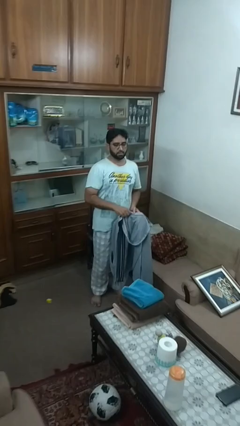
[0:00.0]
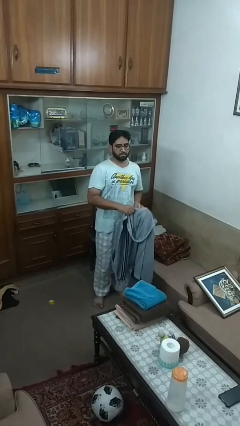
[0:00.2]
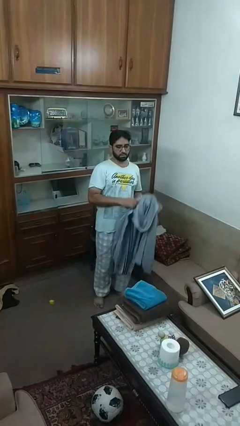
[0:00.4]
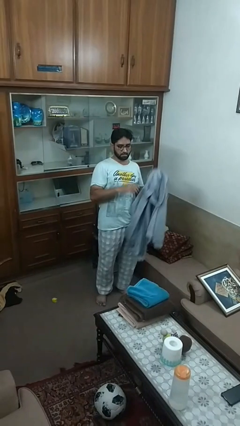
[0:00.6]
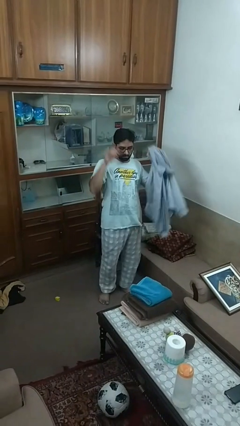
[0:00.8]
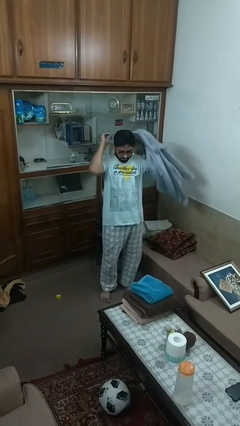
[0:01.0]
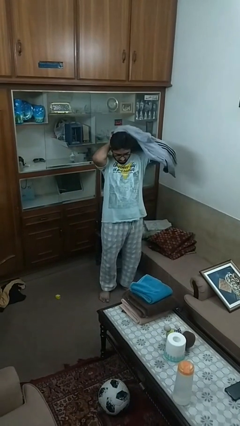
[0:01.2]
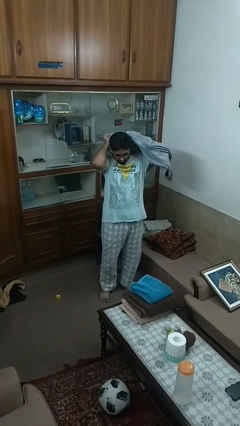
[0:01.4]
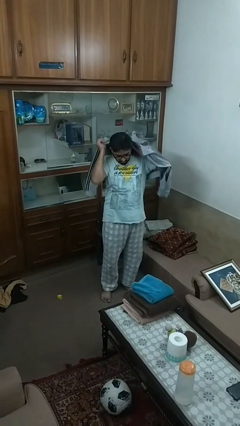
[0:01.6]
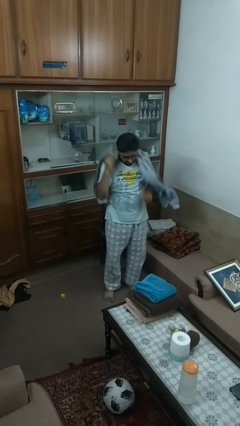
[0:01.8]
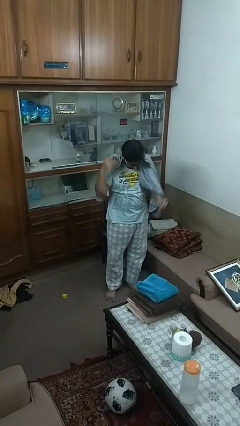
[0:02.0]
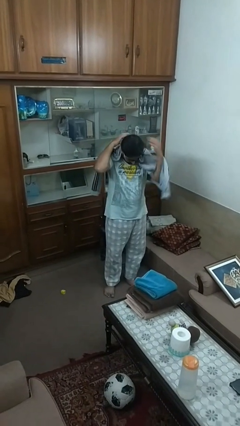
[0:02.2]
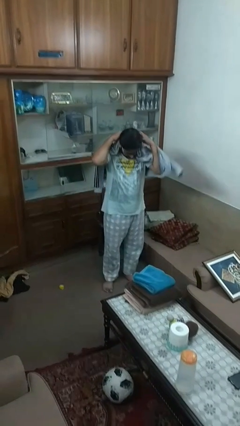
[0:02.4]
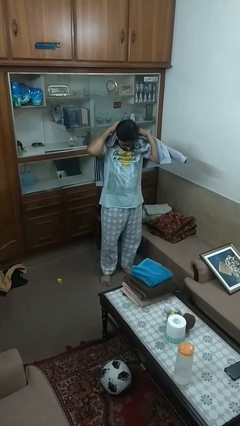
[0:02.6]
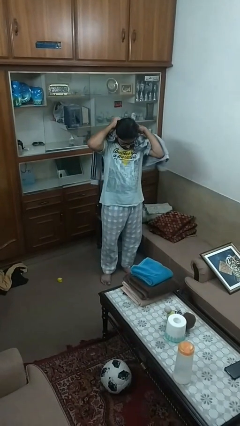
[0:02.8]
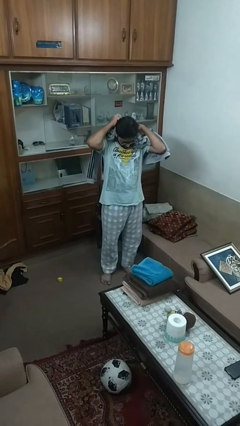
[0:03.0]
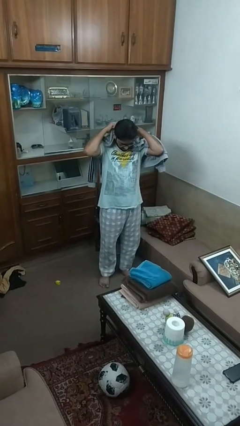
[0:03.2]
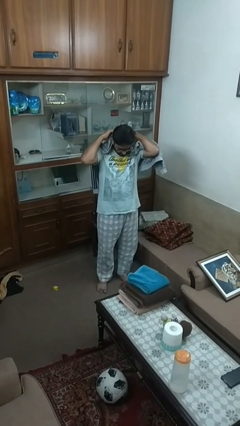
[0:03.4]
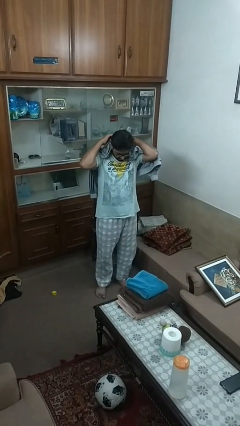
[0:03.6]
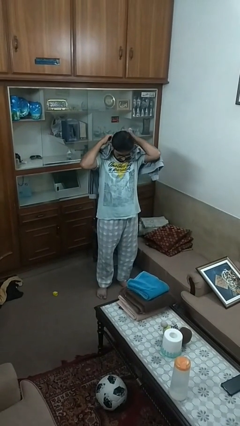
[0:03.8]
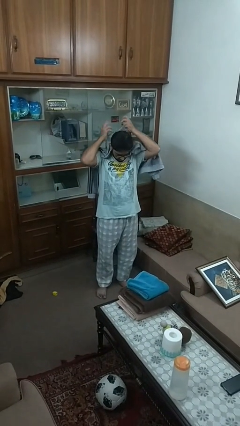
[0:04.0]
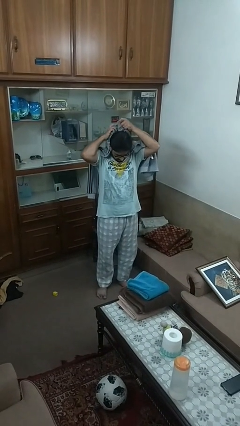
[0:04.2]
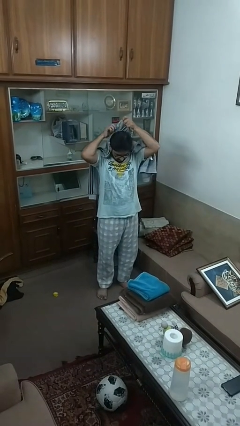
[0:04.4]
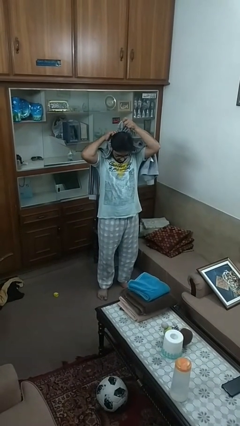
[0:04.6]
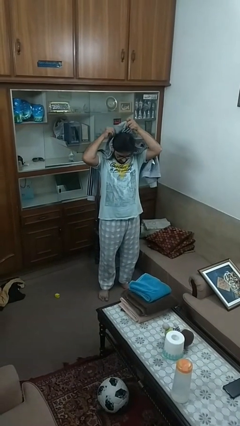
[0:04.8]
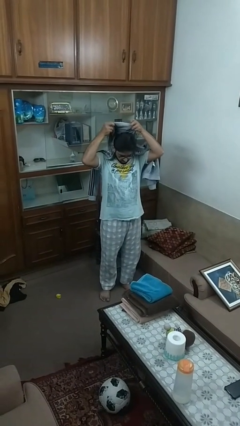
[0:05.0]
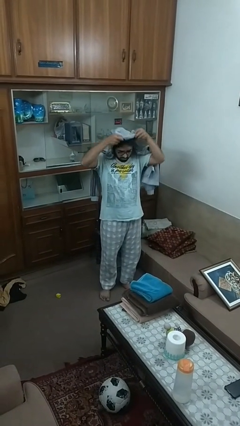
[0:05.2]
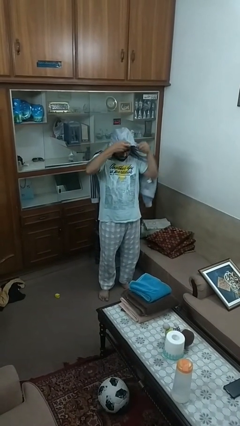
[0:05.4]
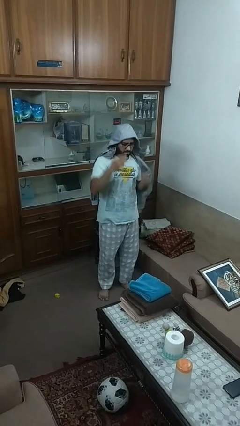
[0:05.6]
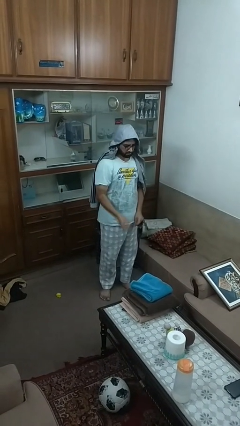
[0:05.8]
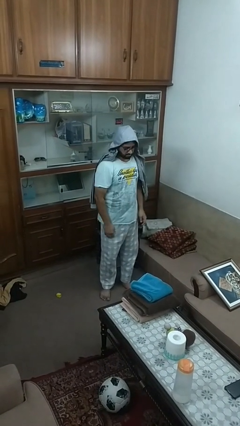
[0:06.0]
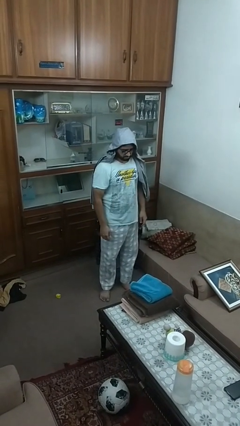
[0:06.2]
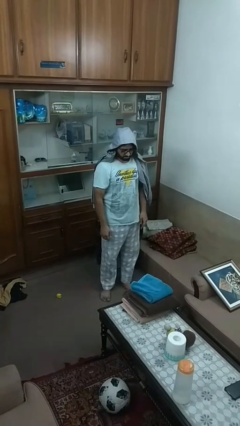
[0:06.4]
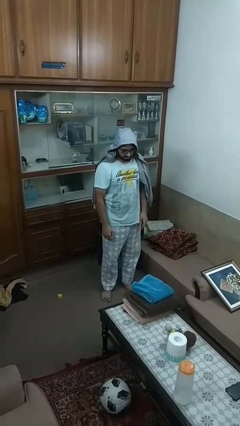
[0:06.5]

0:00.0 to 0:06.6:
person puts on hoodie

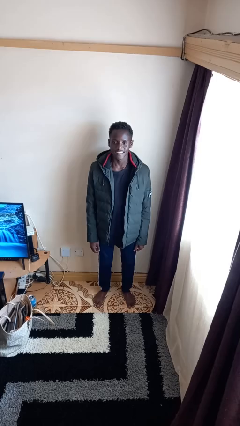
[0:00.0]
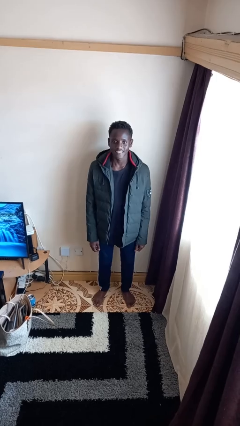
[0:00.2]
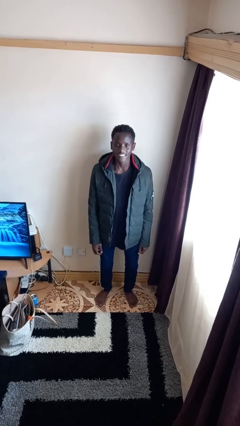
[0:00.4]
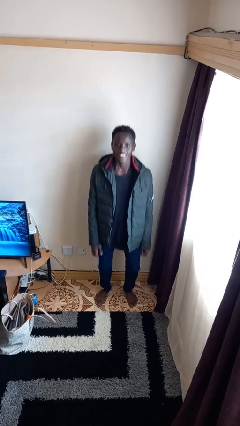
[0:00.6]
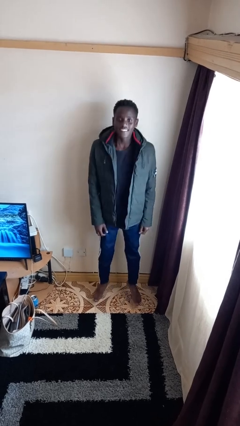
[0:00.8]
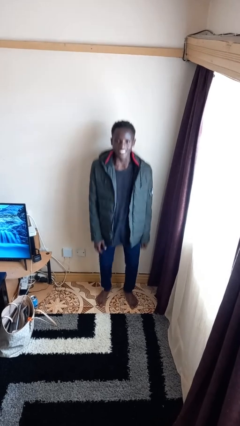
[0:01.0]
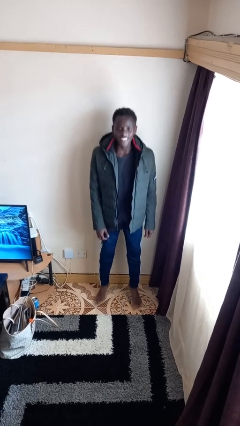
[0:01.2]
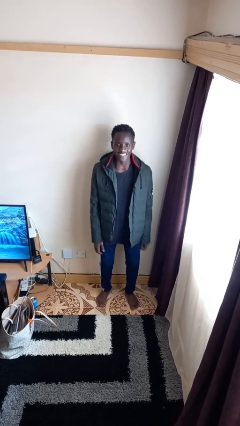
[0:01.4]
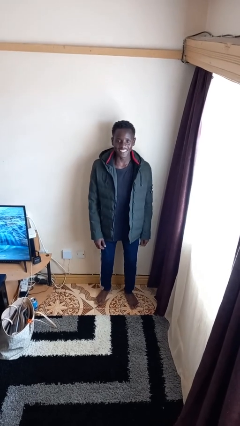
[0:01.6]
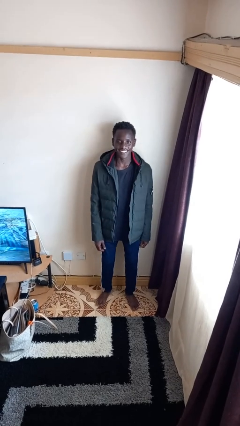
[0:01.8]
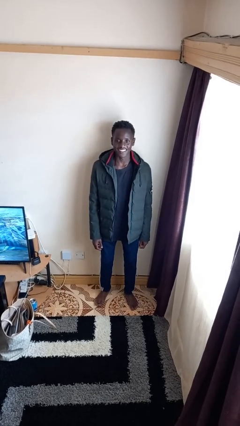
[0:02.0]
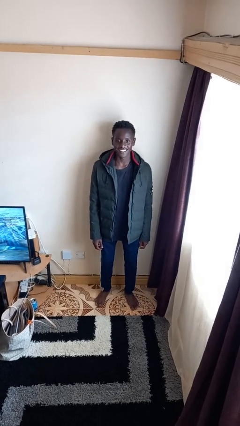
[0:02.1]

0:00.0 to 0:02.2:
person jumps

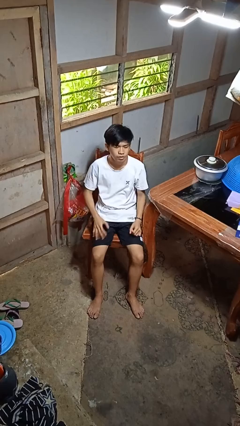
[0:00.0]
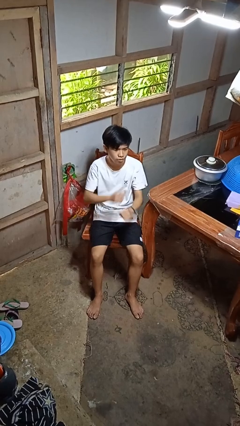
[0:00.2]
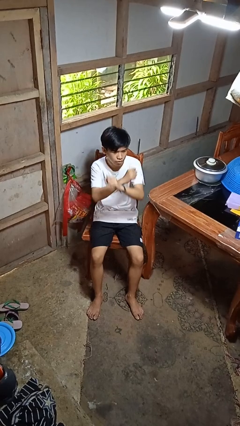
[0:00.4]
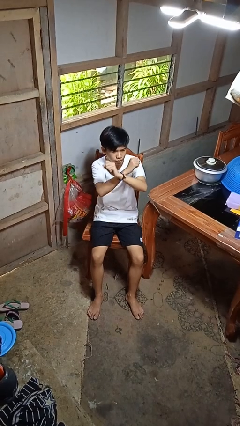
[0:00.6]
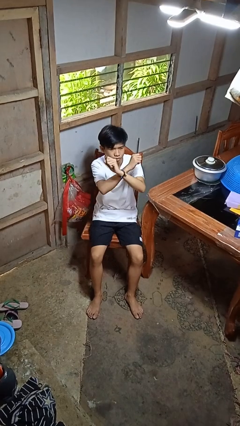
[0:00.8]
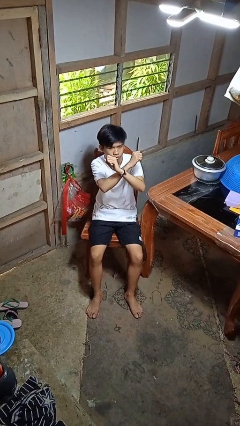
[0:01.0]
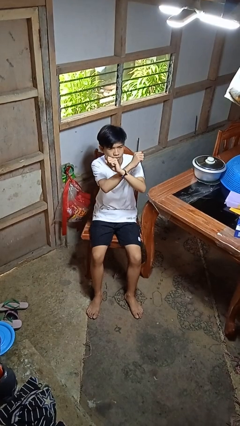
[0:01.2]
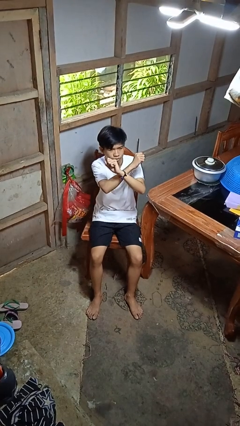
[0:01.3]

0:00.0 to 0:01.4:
person gestures arms x

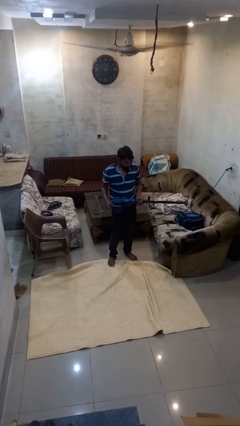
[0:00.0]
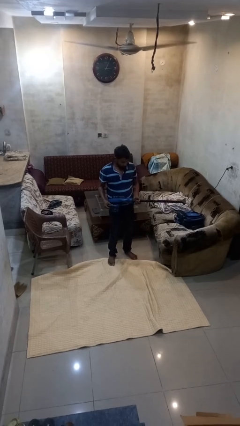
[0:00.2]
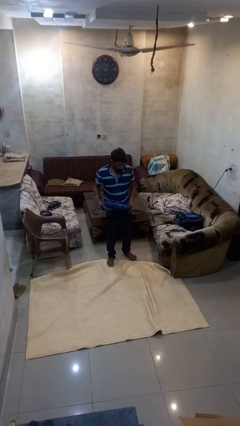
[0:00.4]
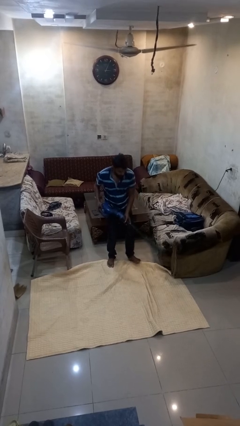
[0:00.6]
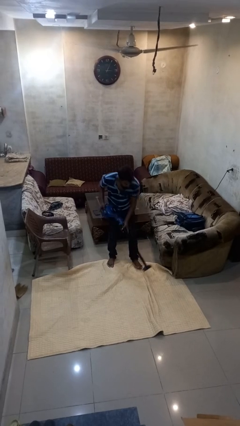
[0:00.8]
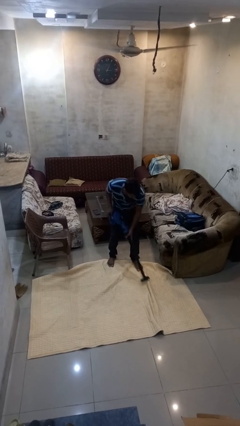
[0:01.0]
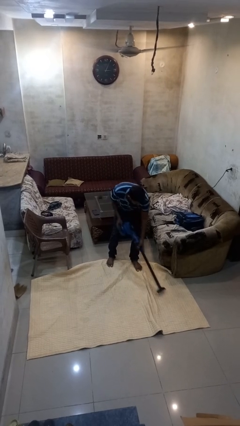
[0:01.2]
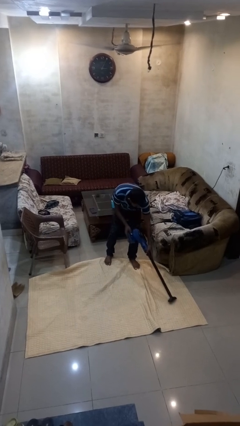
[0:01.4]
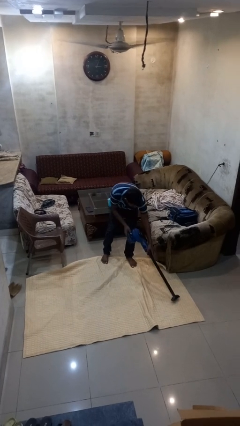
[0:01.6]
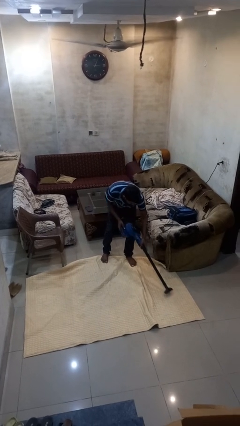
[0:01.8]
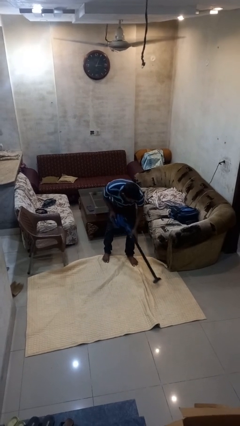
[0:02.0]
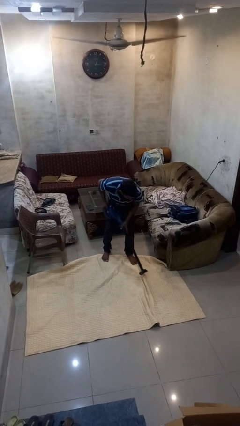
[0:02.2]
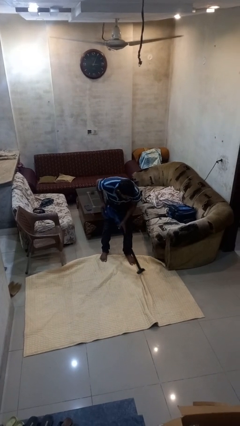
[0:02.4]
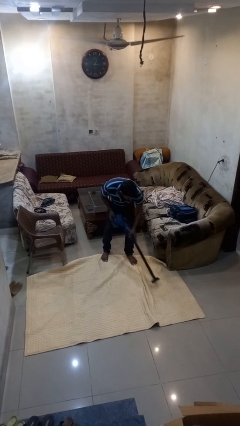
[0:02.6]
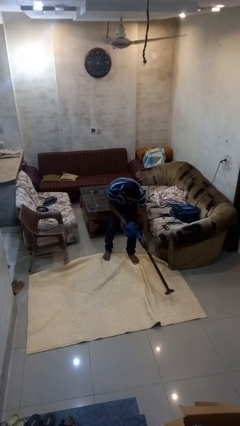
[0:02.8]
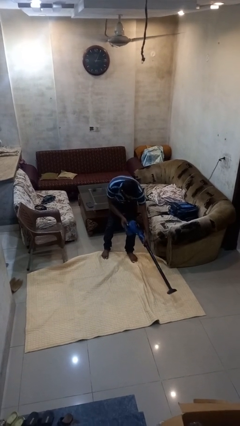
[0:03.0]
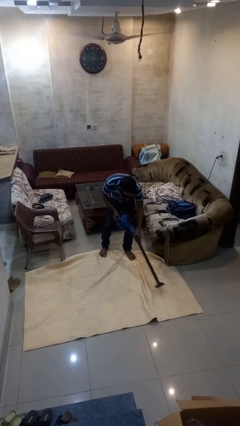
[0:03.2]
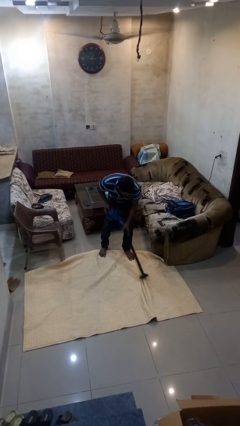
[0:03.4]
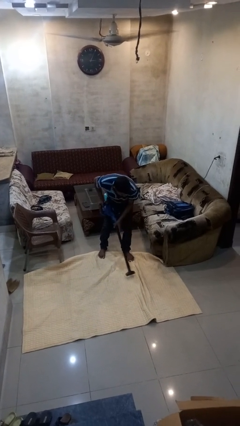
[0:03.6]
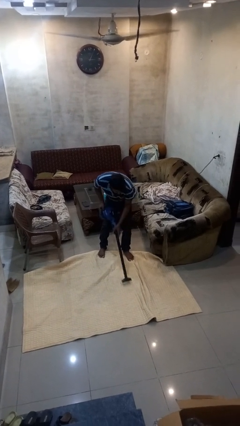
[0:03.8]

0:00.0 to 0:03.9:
person vacuums carpet

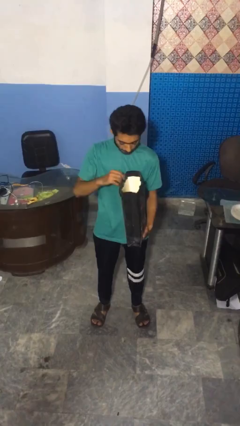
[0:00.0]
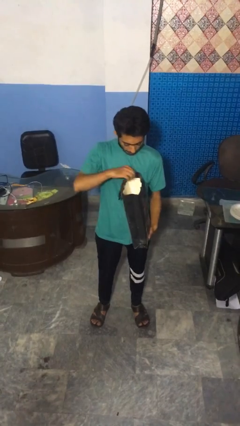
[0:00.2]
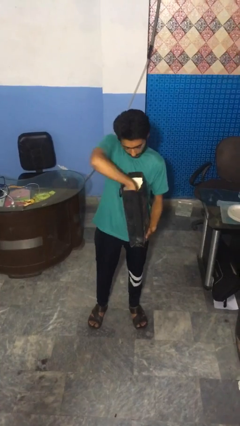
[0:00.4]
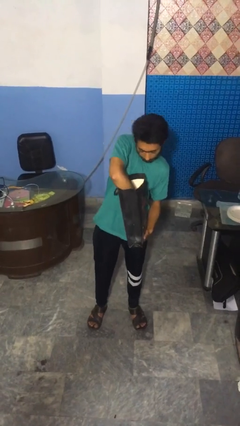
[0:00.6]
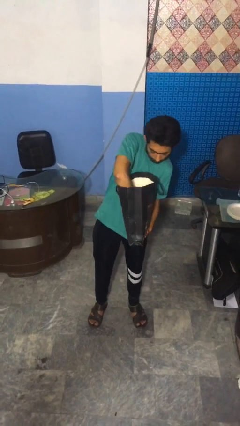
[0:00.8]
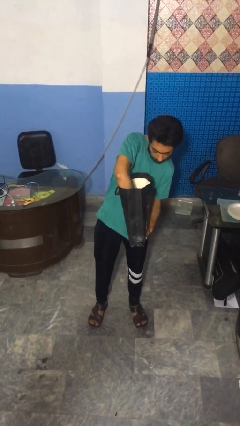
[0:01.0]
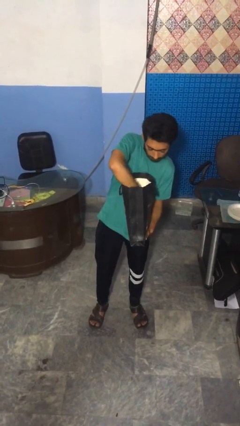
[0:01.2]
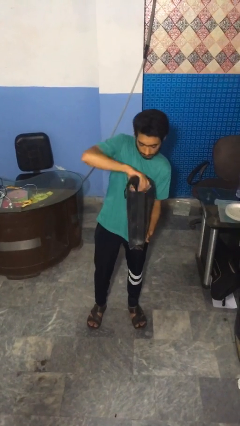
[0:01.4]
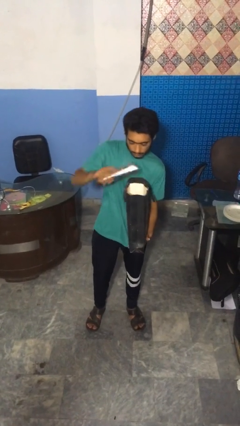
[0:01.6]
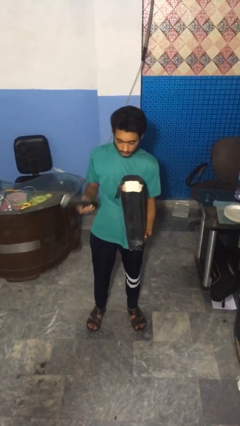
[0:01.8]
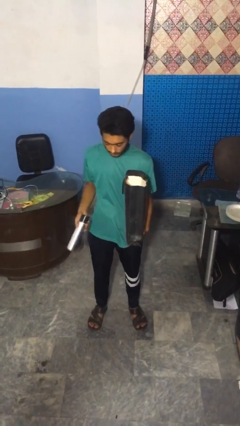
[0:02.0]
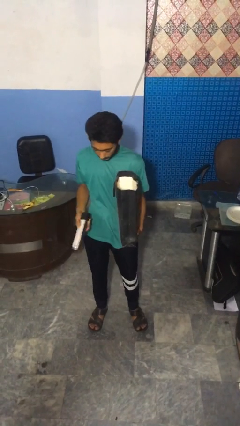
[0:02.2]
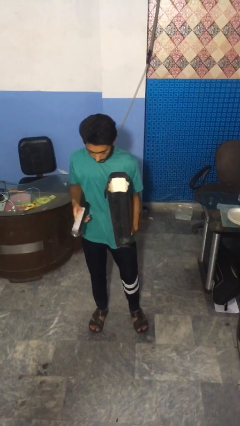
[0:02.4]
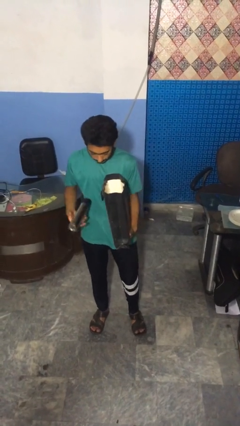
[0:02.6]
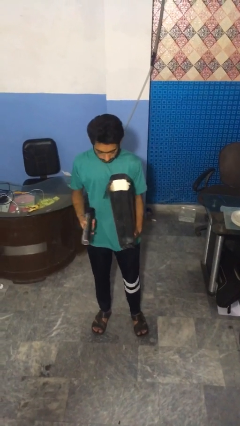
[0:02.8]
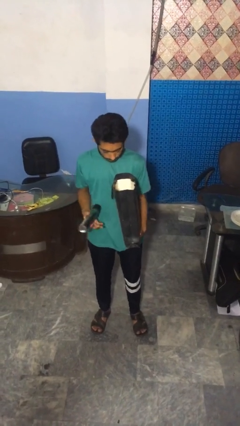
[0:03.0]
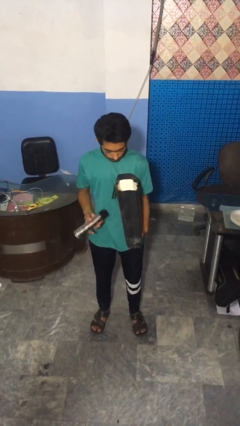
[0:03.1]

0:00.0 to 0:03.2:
person takes object from bag

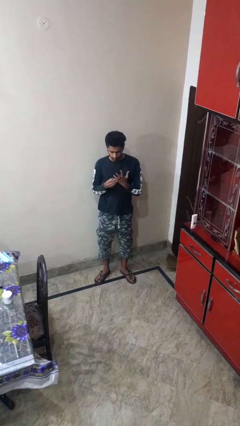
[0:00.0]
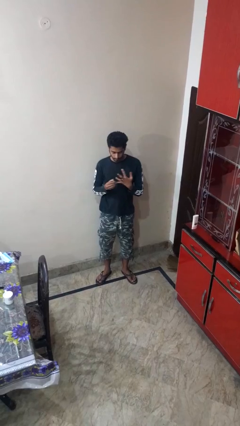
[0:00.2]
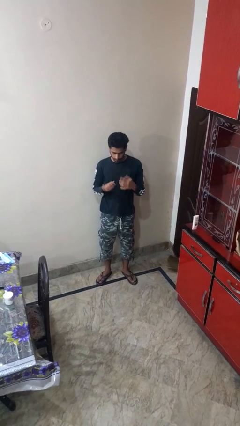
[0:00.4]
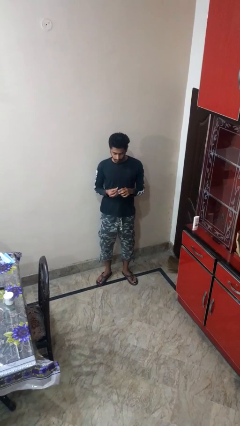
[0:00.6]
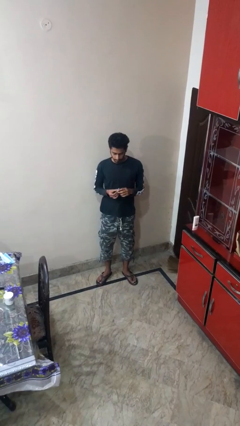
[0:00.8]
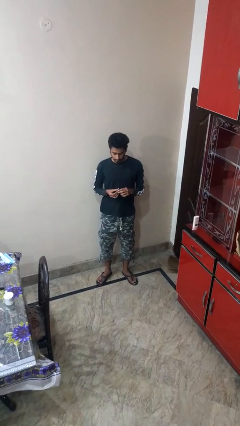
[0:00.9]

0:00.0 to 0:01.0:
person takes off ring
